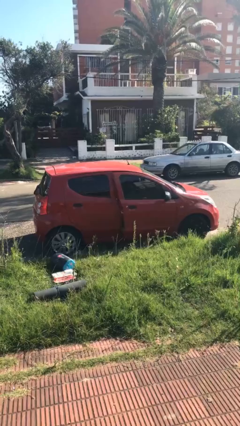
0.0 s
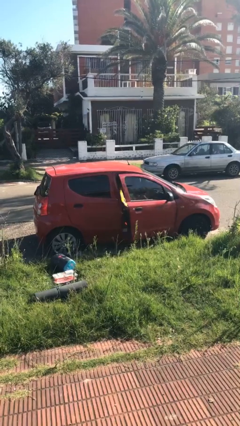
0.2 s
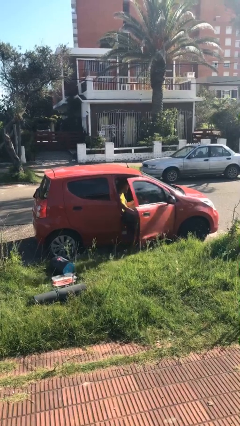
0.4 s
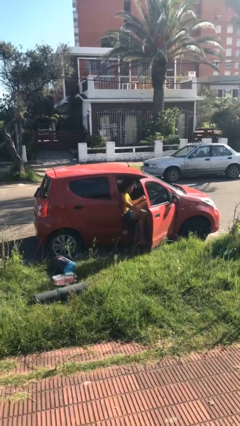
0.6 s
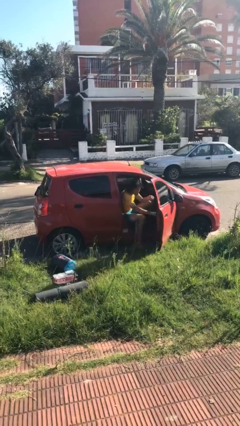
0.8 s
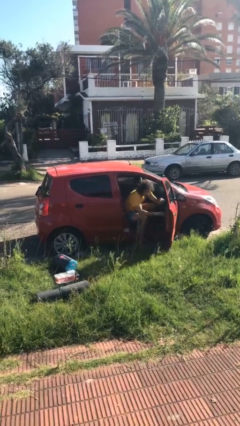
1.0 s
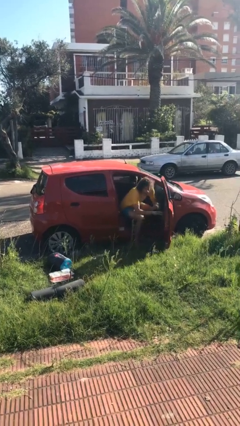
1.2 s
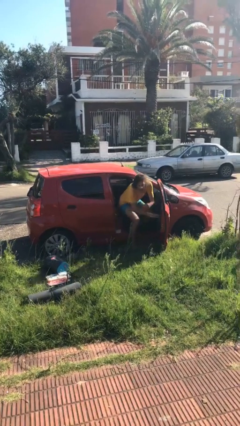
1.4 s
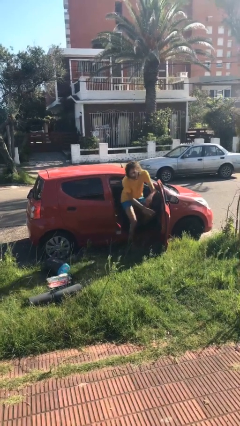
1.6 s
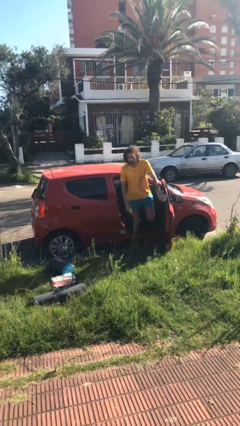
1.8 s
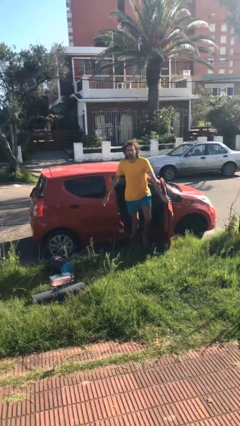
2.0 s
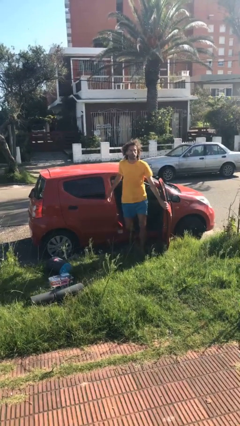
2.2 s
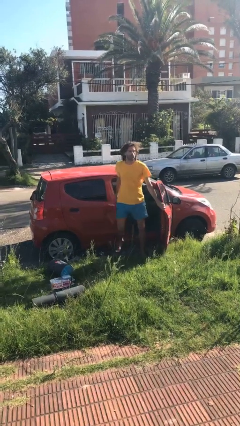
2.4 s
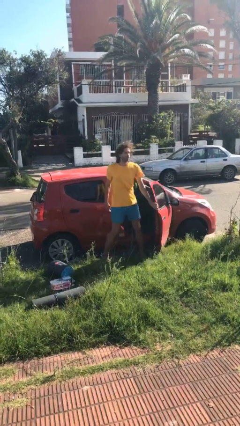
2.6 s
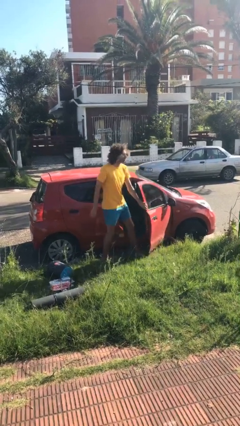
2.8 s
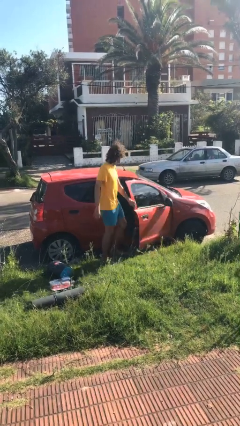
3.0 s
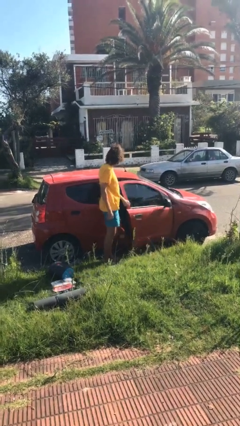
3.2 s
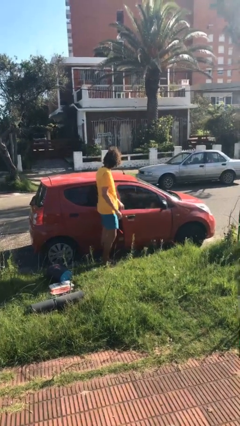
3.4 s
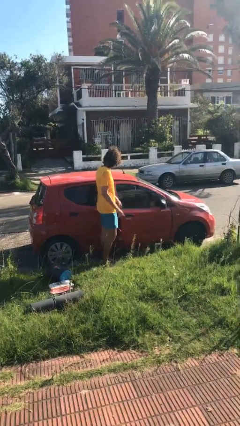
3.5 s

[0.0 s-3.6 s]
car drops off person

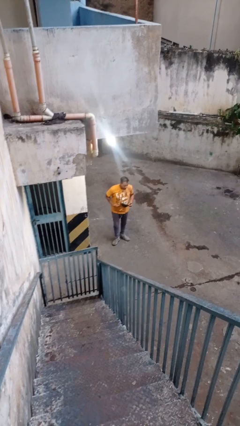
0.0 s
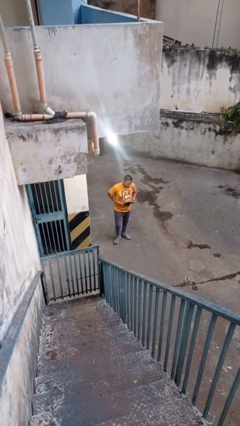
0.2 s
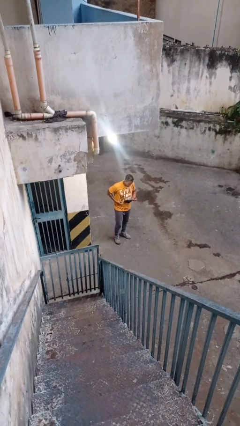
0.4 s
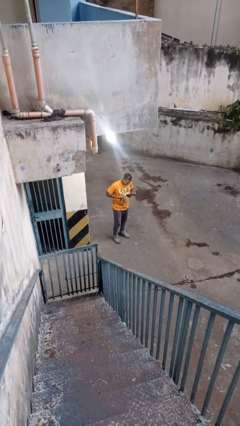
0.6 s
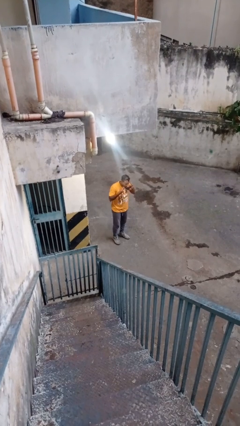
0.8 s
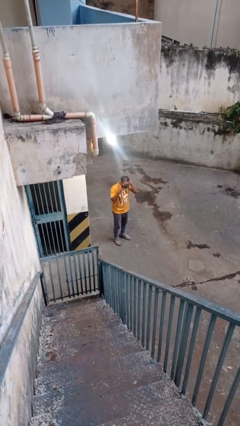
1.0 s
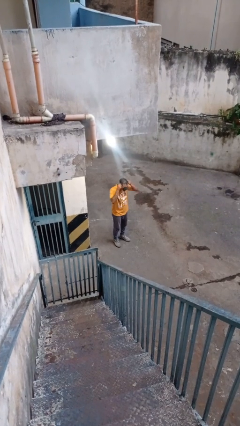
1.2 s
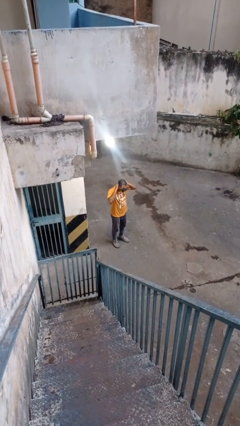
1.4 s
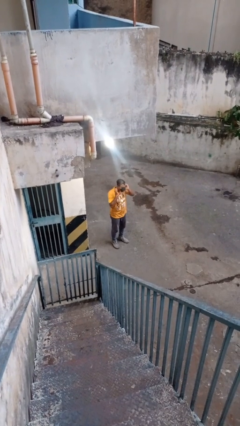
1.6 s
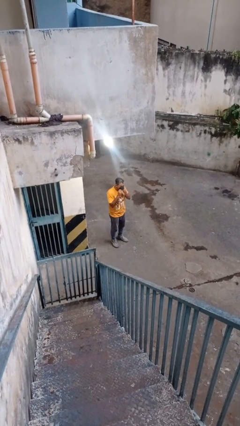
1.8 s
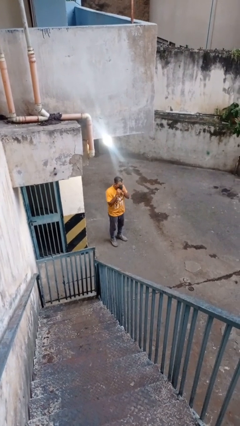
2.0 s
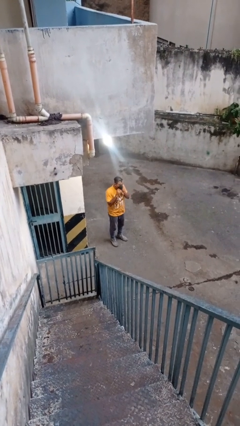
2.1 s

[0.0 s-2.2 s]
person puts on facemask

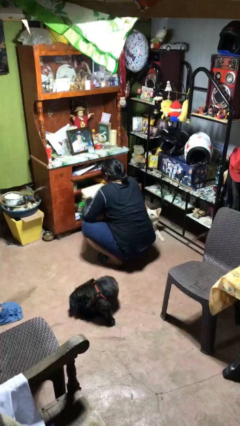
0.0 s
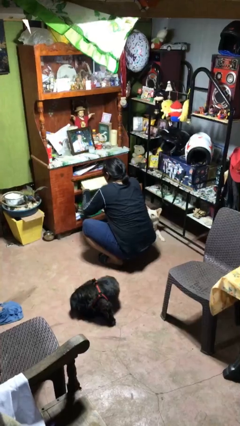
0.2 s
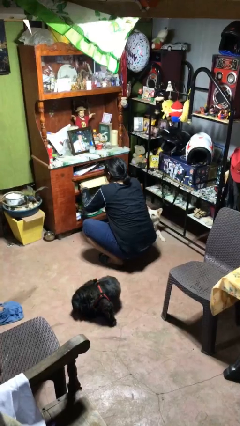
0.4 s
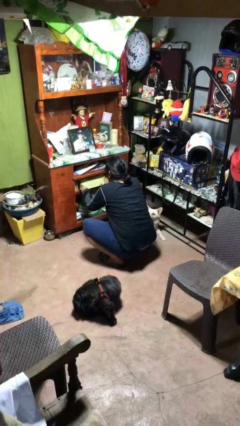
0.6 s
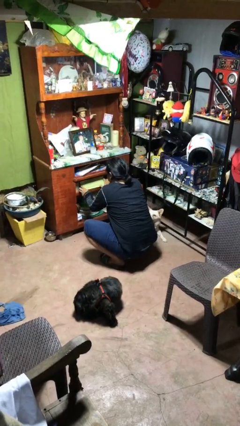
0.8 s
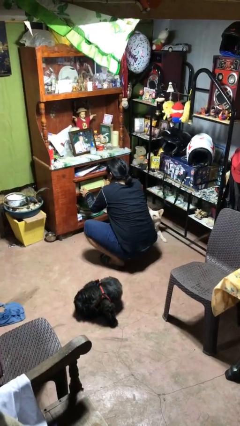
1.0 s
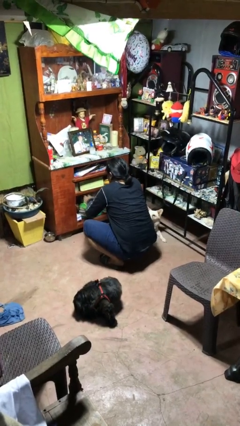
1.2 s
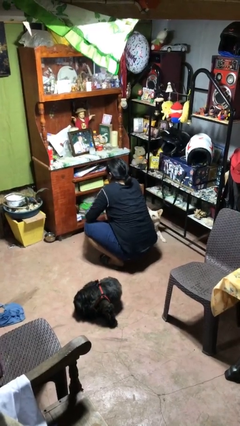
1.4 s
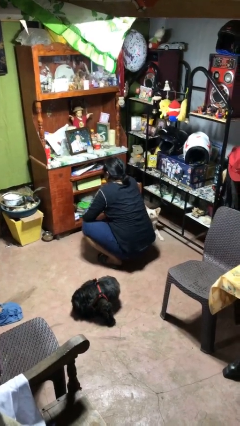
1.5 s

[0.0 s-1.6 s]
person puts down object into cabinet

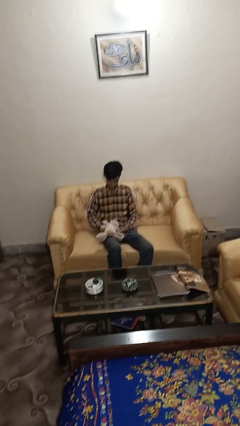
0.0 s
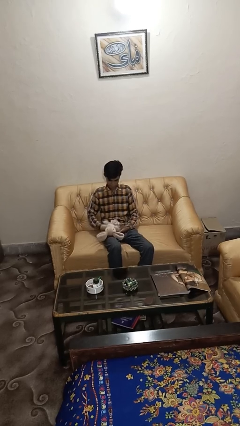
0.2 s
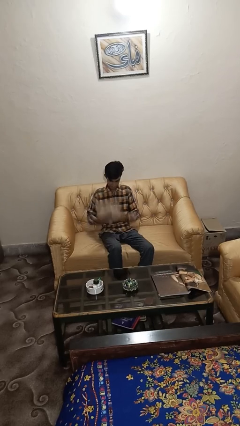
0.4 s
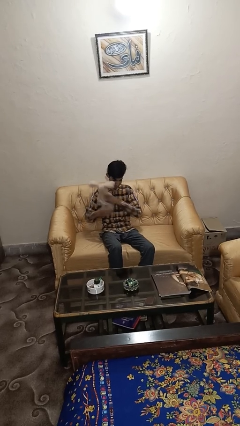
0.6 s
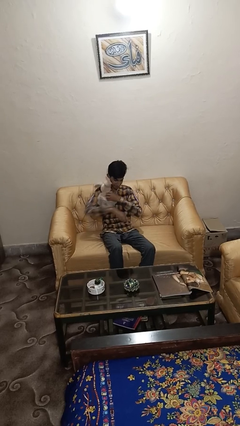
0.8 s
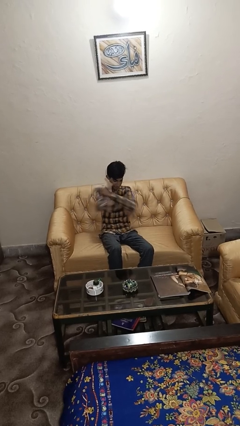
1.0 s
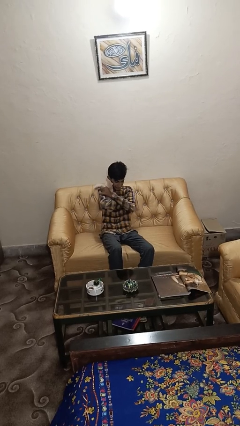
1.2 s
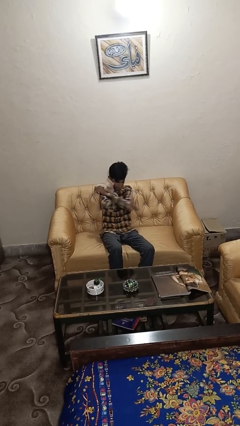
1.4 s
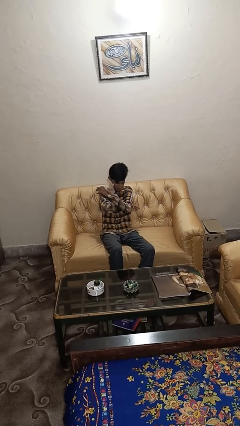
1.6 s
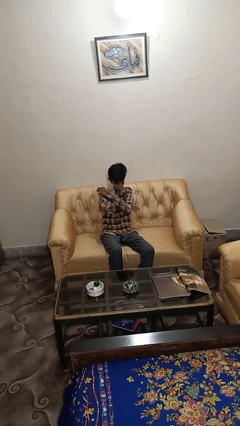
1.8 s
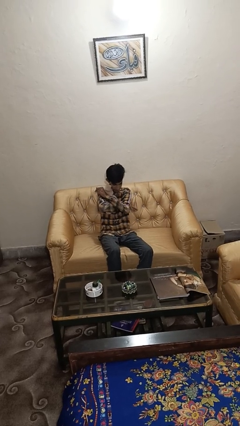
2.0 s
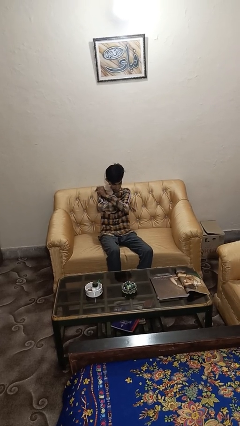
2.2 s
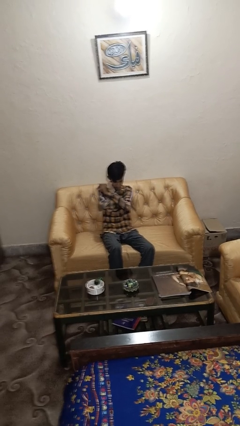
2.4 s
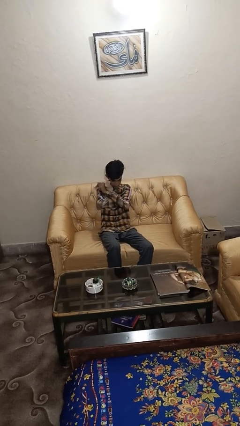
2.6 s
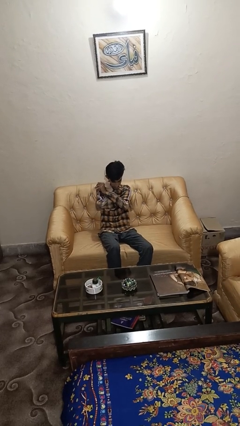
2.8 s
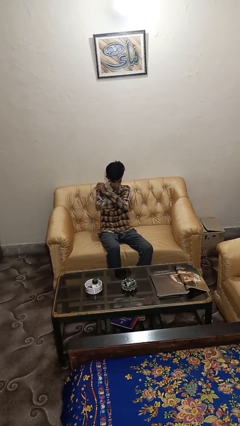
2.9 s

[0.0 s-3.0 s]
person hugs stuffed animal

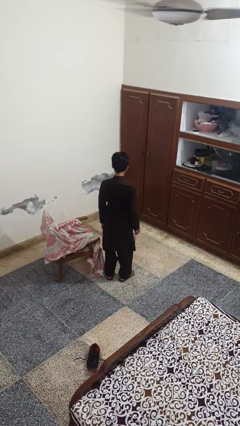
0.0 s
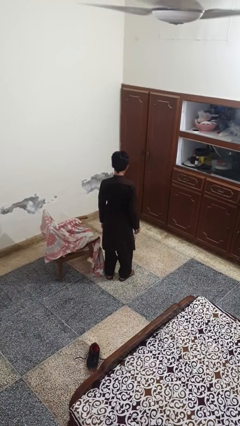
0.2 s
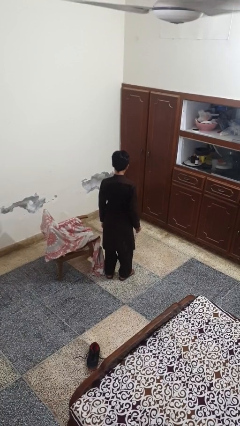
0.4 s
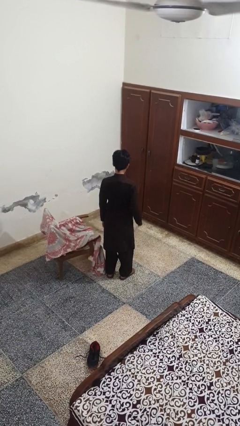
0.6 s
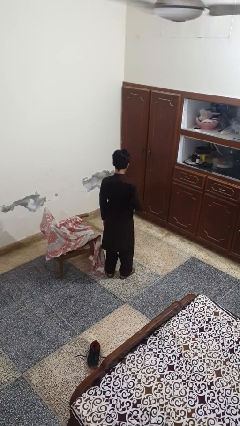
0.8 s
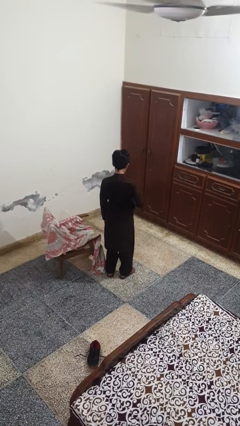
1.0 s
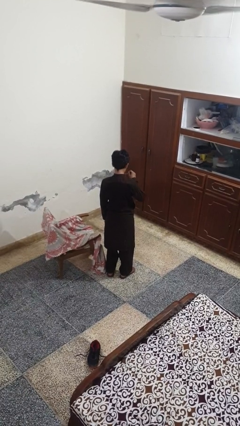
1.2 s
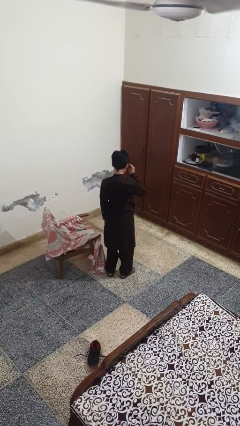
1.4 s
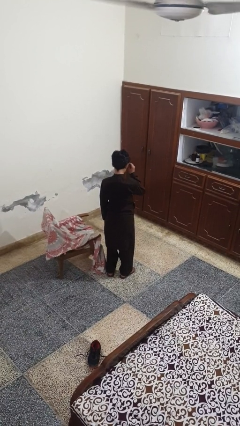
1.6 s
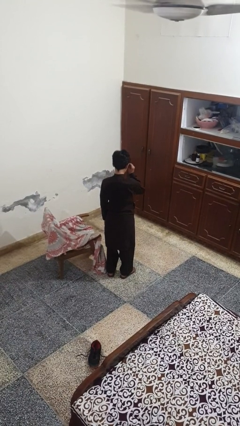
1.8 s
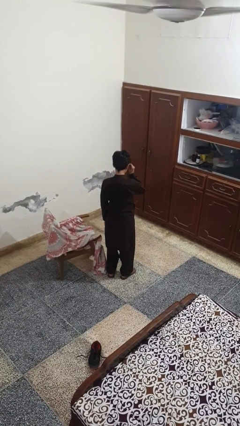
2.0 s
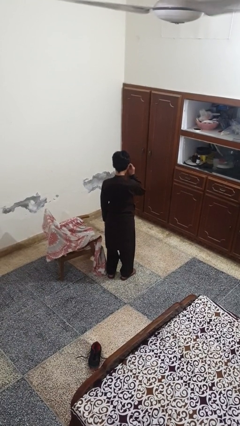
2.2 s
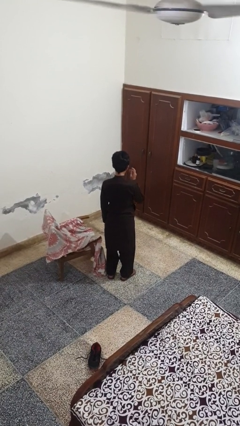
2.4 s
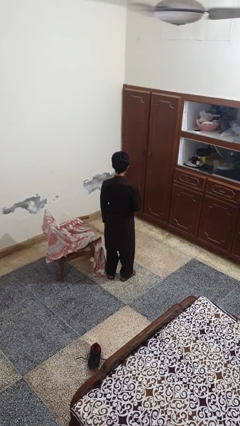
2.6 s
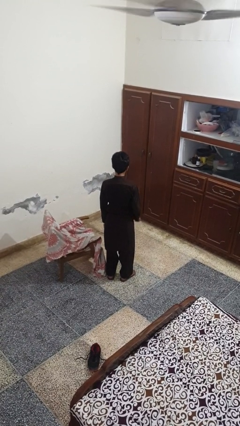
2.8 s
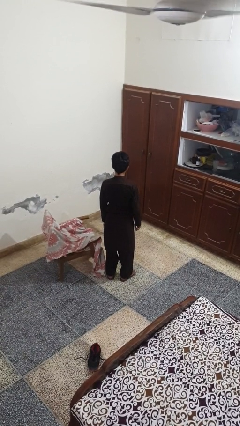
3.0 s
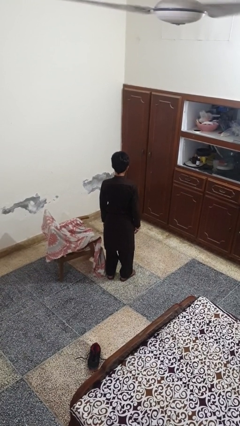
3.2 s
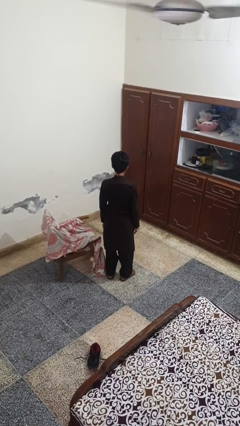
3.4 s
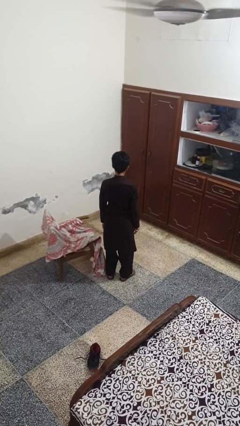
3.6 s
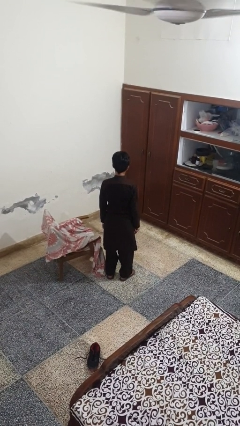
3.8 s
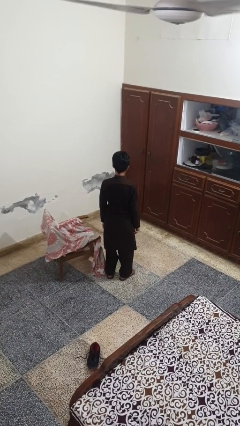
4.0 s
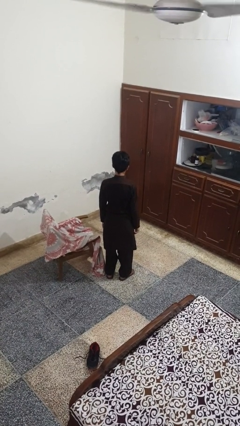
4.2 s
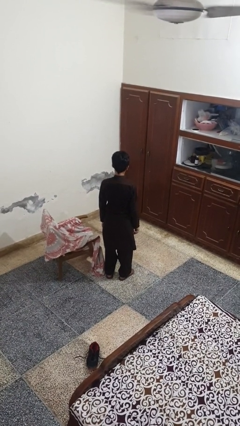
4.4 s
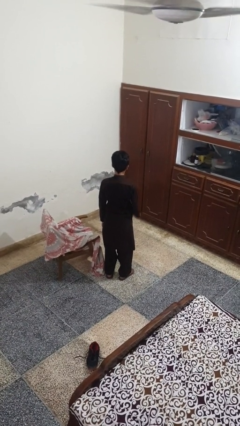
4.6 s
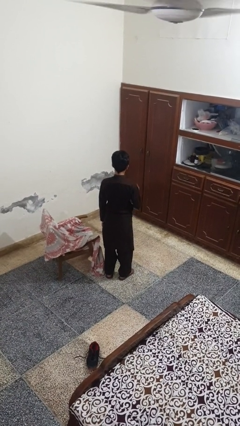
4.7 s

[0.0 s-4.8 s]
person puts on glasses

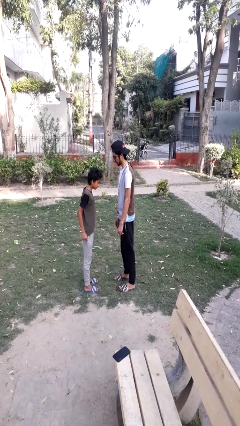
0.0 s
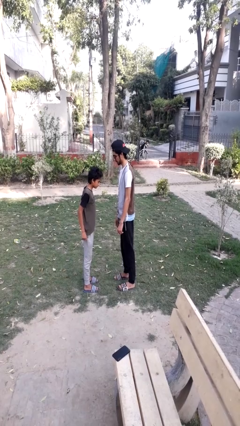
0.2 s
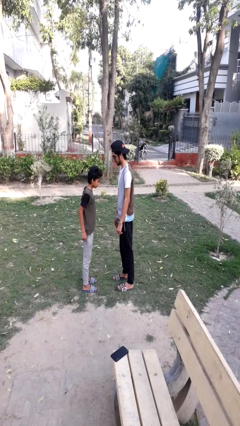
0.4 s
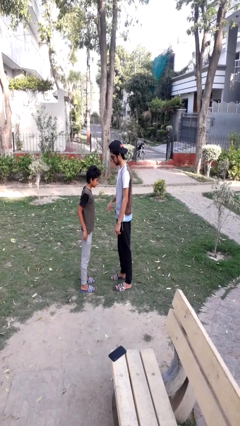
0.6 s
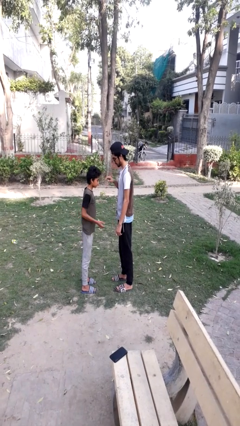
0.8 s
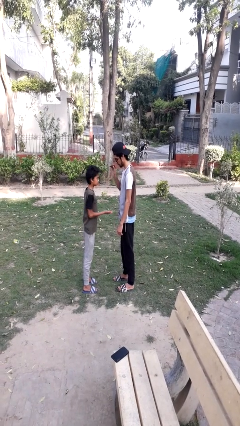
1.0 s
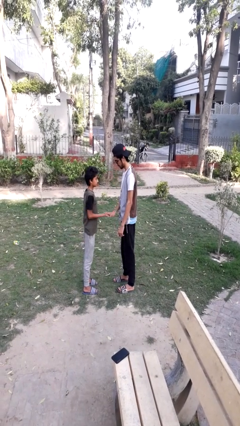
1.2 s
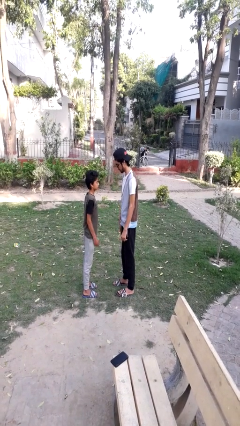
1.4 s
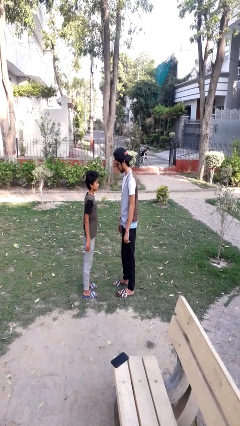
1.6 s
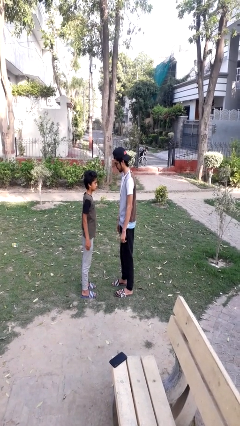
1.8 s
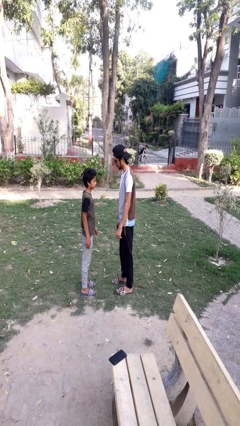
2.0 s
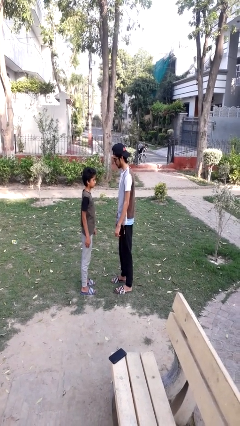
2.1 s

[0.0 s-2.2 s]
person highfives hand

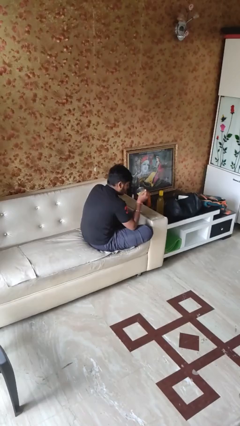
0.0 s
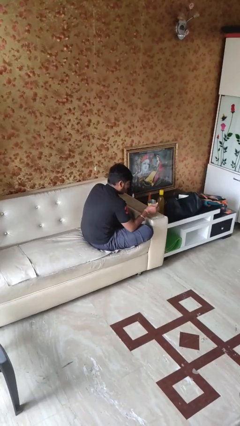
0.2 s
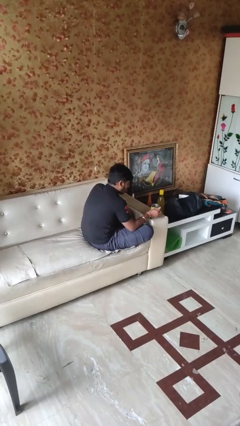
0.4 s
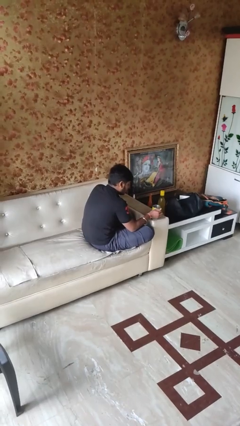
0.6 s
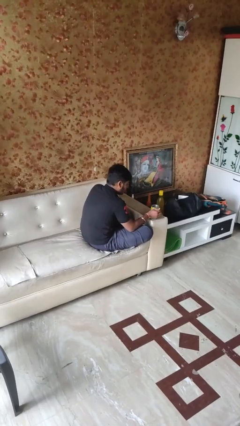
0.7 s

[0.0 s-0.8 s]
person puts down object on table
